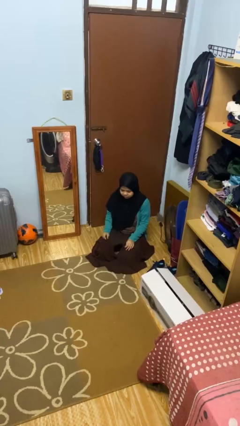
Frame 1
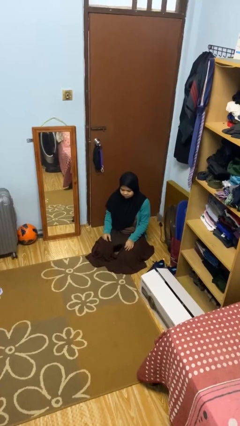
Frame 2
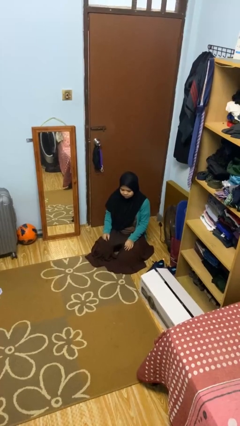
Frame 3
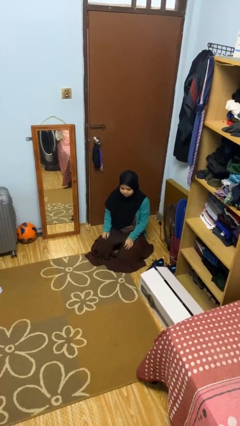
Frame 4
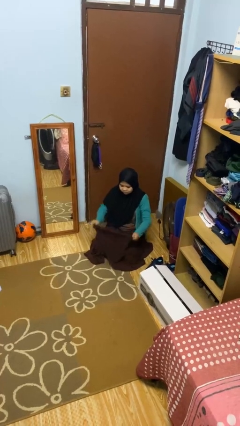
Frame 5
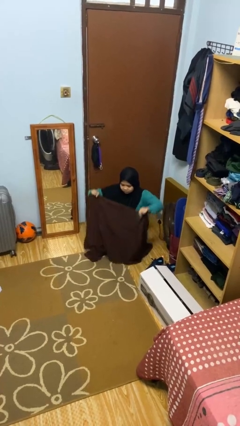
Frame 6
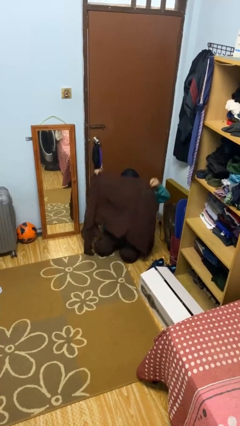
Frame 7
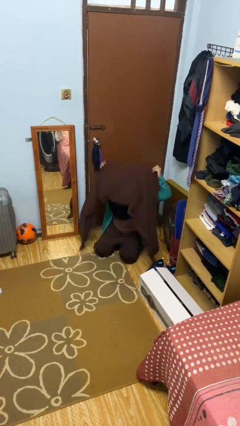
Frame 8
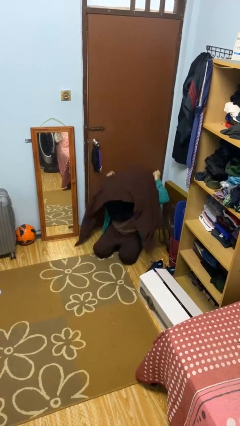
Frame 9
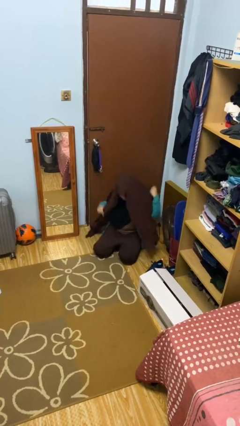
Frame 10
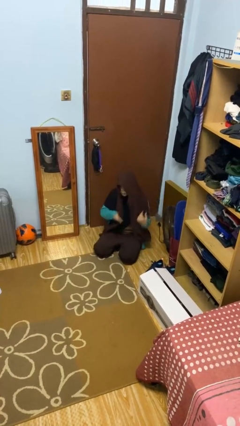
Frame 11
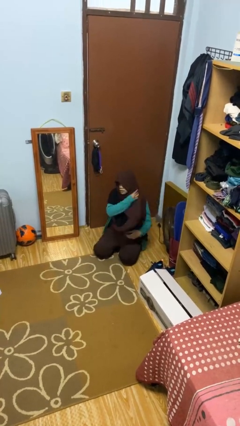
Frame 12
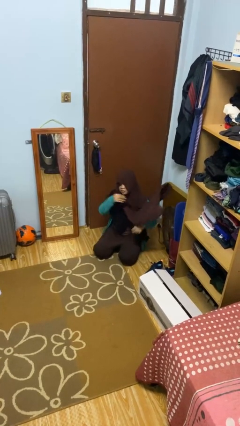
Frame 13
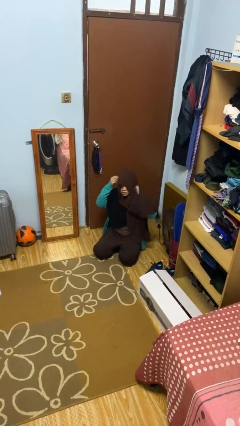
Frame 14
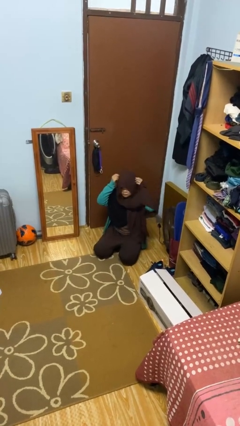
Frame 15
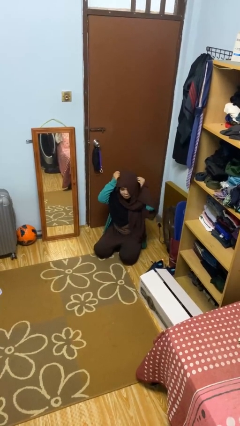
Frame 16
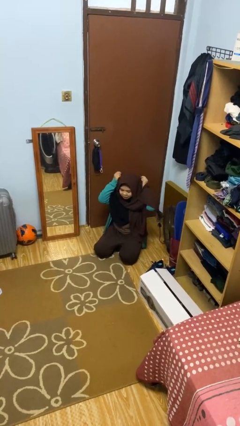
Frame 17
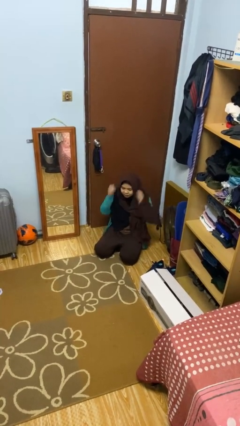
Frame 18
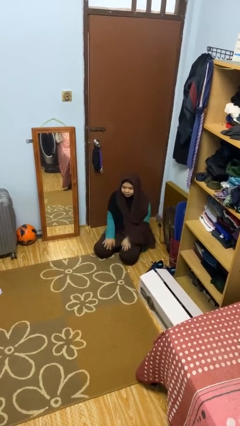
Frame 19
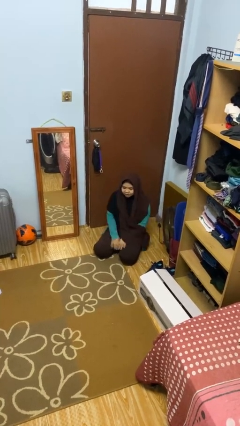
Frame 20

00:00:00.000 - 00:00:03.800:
person puts on scarf

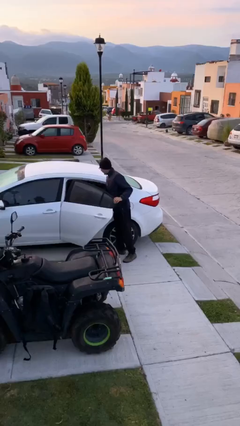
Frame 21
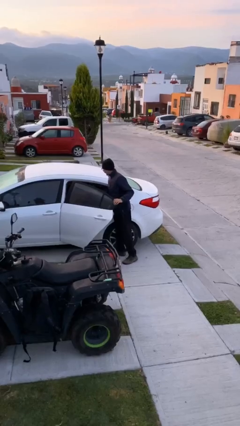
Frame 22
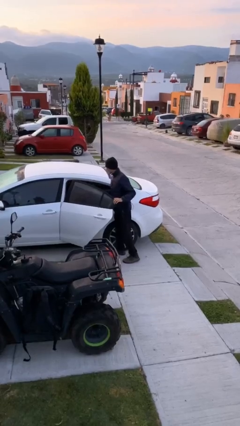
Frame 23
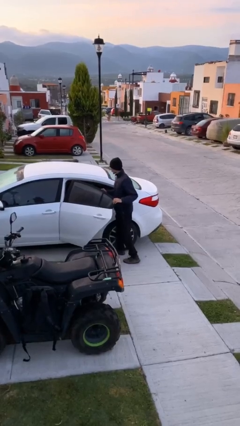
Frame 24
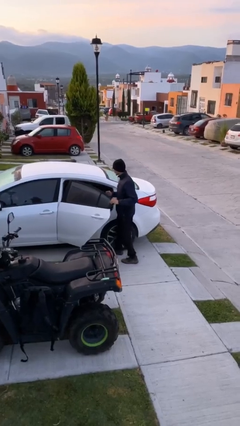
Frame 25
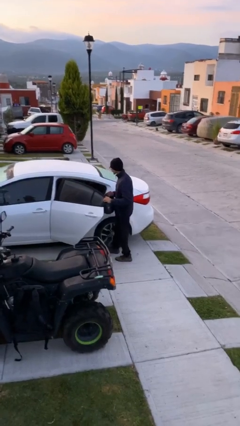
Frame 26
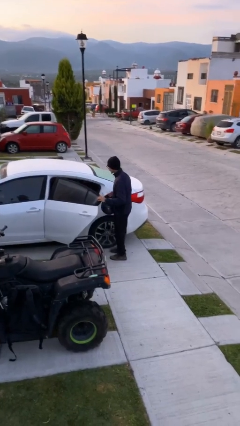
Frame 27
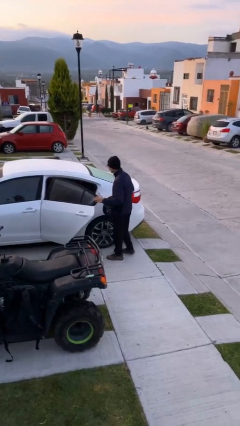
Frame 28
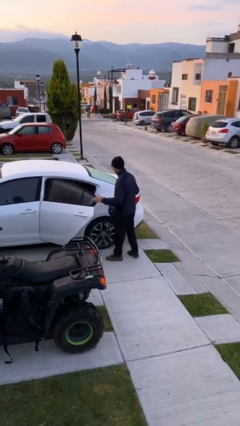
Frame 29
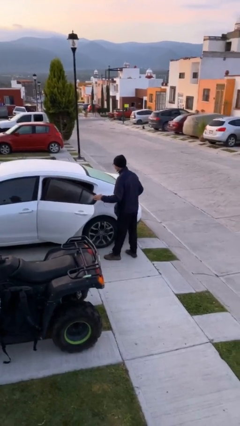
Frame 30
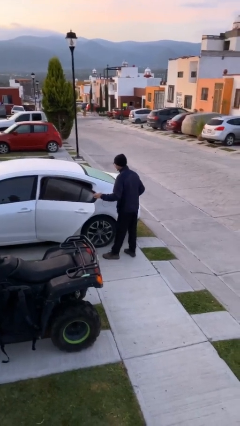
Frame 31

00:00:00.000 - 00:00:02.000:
person unloads car

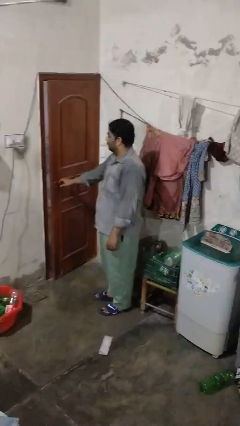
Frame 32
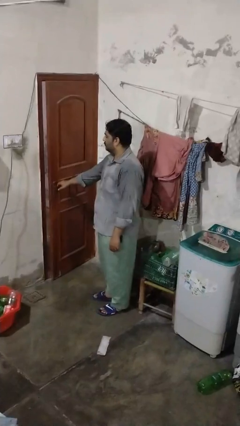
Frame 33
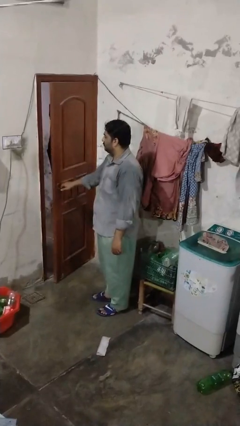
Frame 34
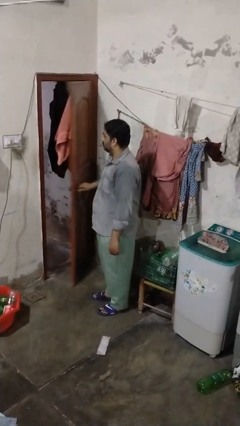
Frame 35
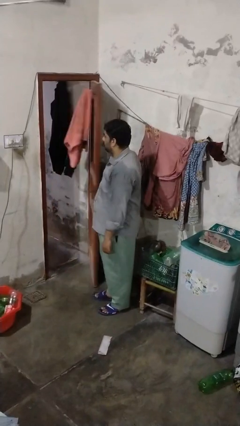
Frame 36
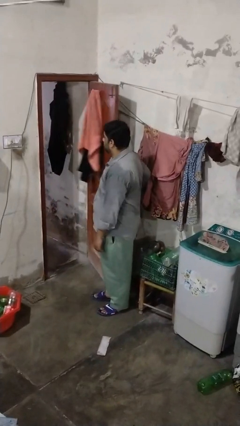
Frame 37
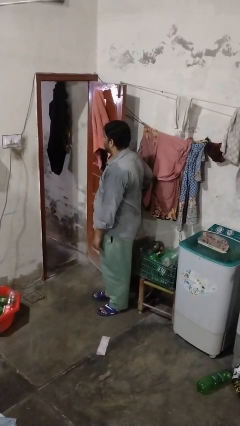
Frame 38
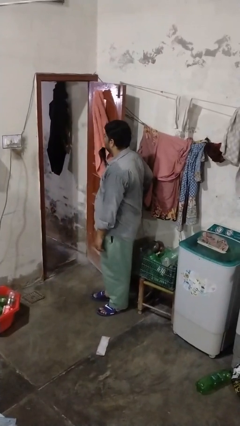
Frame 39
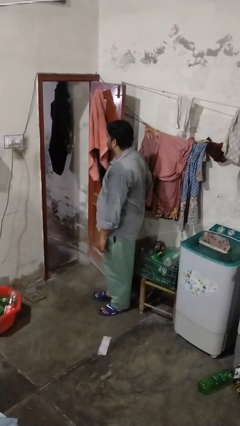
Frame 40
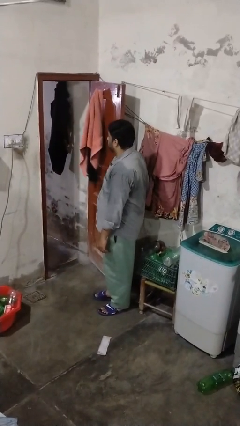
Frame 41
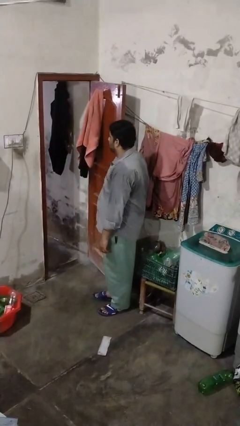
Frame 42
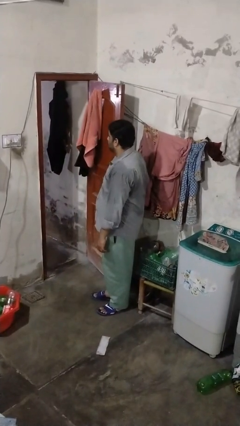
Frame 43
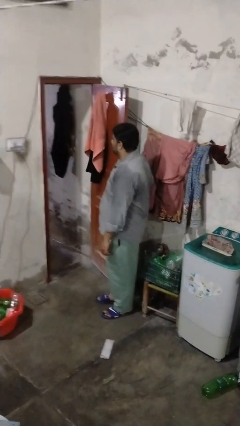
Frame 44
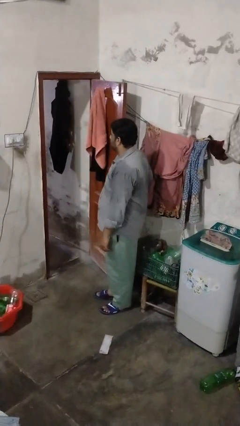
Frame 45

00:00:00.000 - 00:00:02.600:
person opens closet door

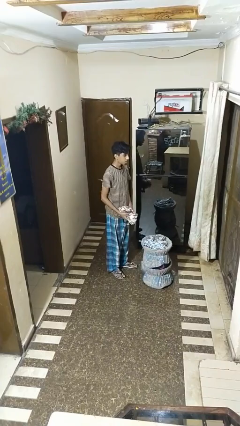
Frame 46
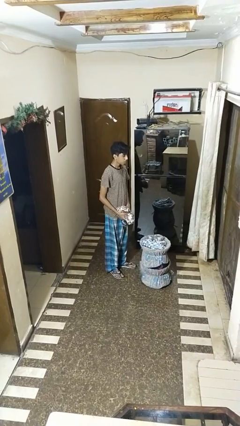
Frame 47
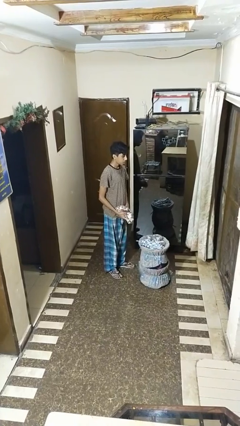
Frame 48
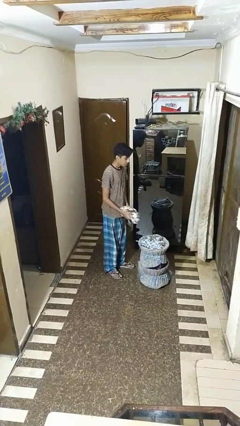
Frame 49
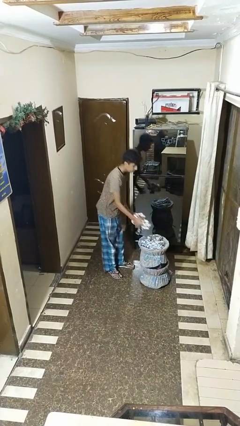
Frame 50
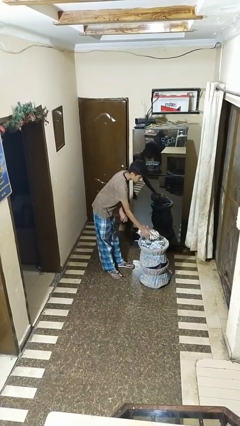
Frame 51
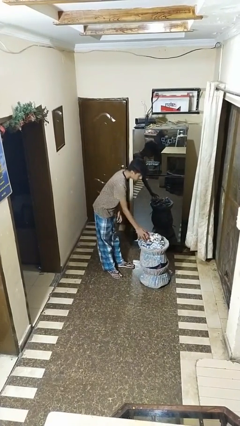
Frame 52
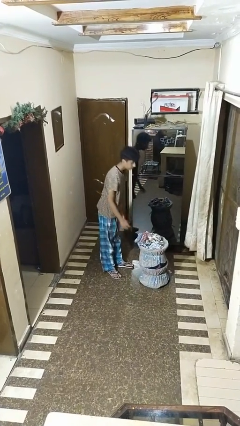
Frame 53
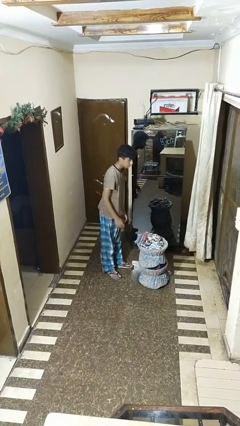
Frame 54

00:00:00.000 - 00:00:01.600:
person puts object into basket

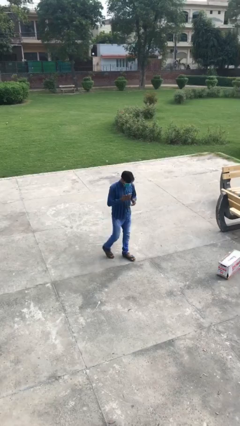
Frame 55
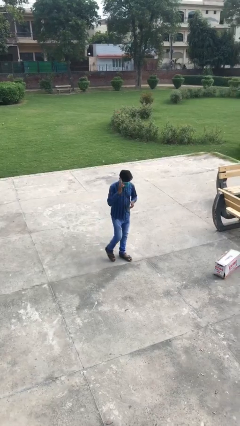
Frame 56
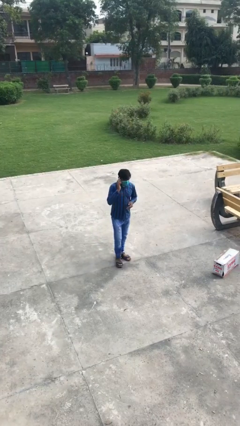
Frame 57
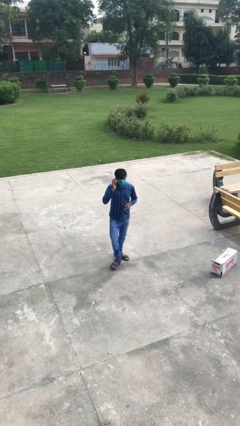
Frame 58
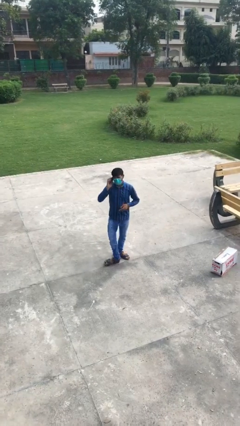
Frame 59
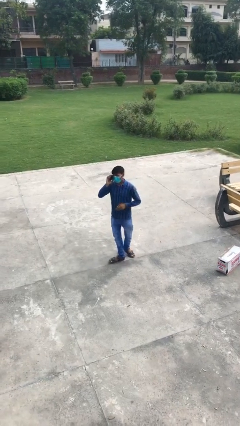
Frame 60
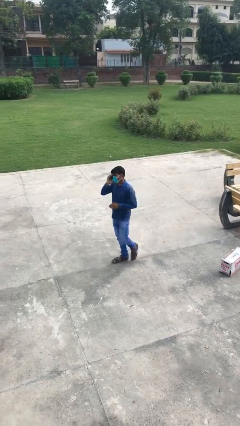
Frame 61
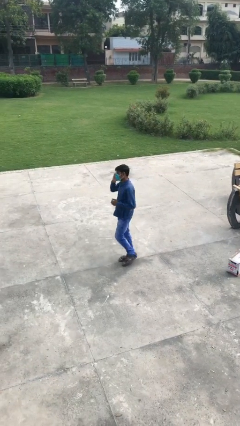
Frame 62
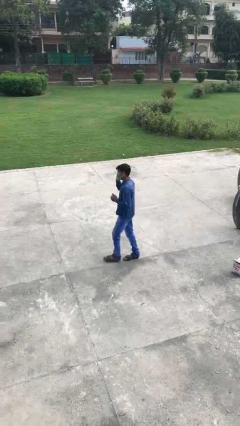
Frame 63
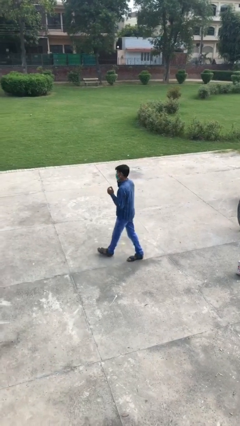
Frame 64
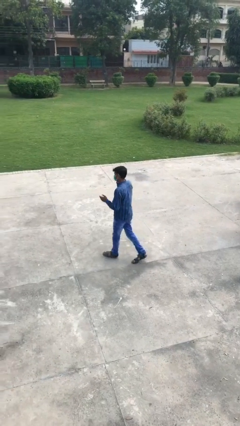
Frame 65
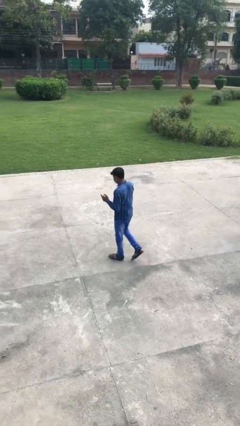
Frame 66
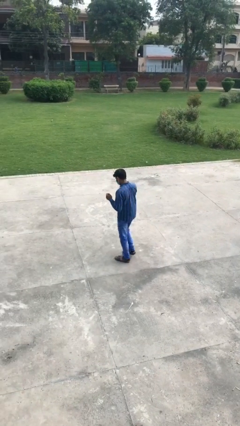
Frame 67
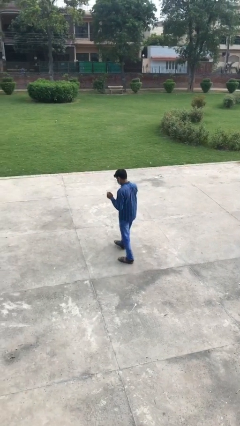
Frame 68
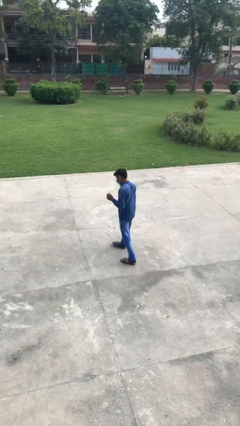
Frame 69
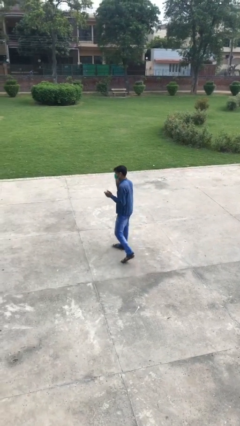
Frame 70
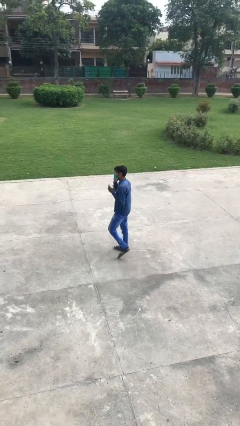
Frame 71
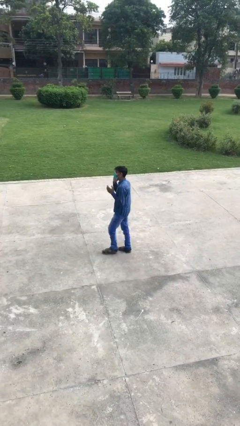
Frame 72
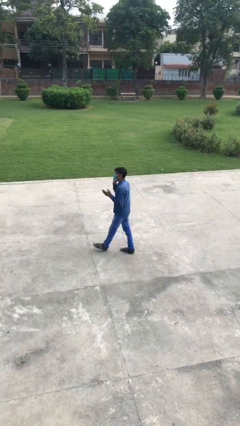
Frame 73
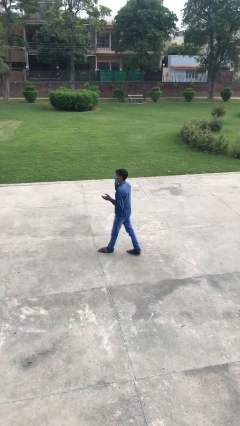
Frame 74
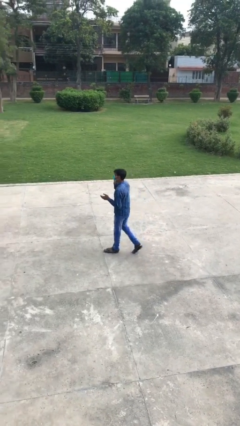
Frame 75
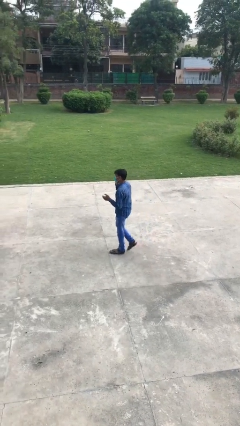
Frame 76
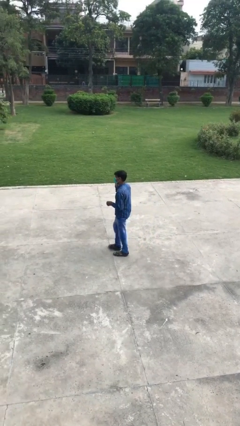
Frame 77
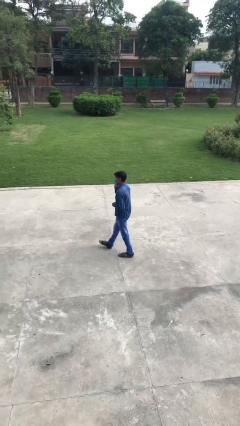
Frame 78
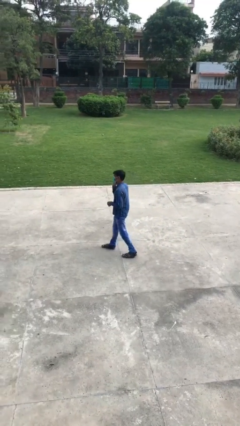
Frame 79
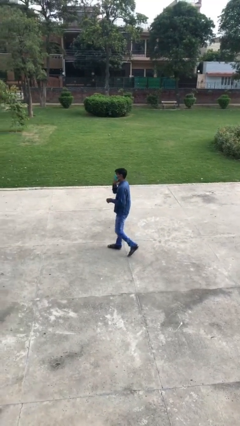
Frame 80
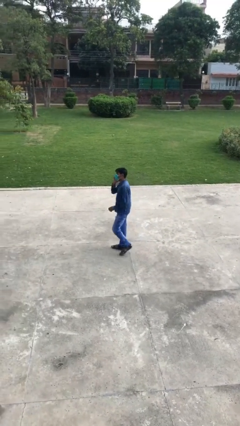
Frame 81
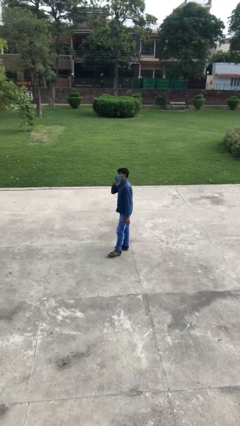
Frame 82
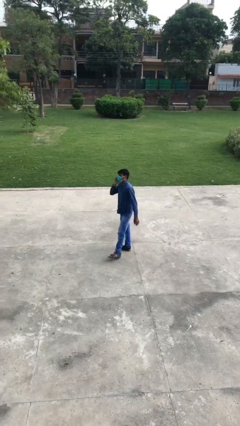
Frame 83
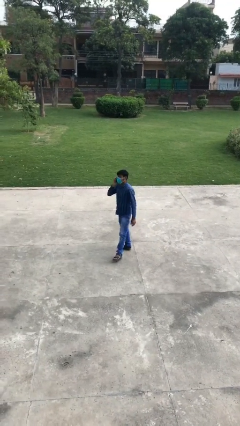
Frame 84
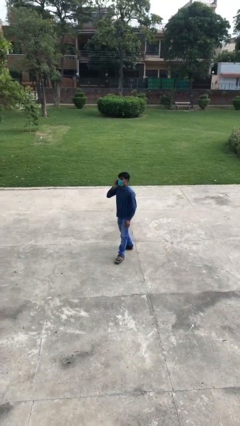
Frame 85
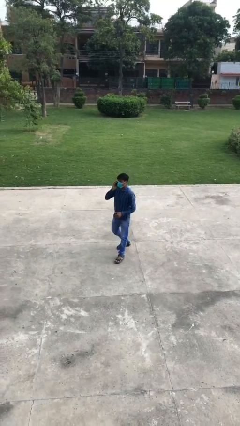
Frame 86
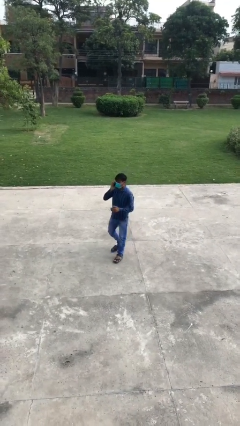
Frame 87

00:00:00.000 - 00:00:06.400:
person talks on phone

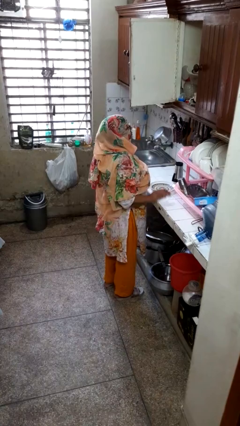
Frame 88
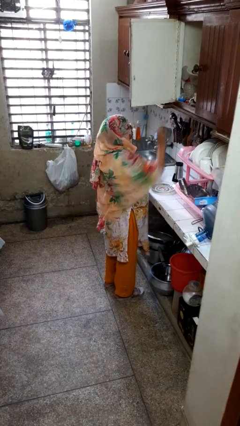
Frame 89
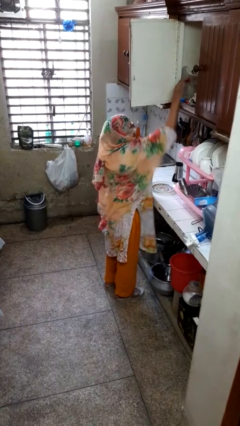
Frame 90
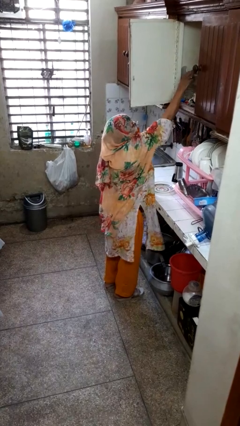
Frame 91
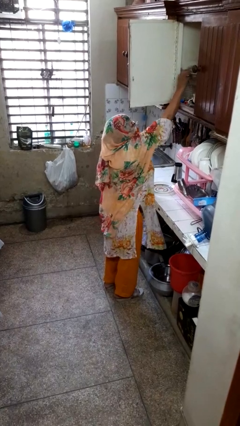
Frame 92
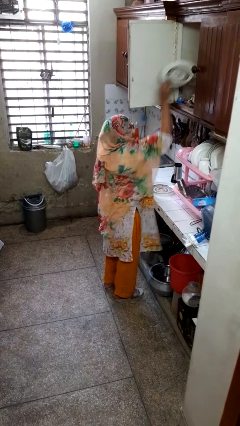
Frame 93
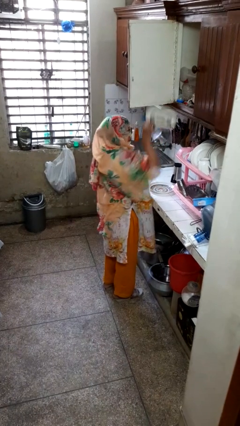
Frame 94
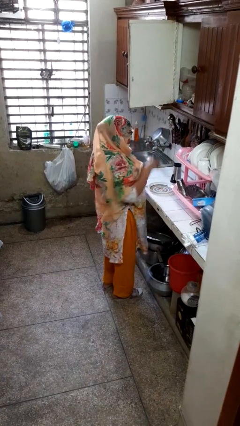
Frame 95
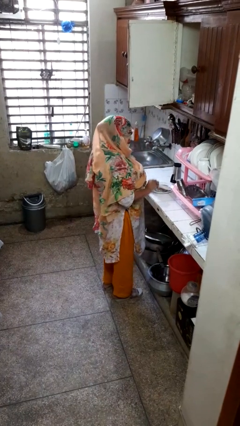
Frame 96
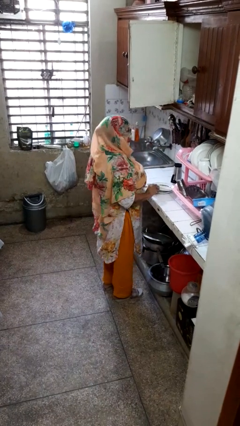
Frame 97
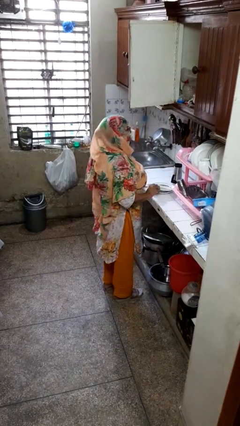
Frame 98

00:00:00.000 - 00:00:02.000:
person takes object from cabinet
